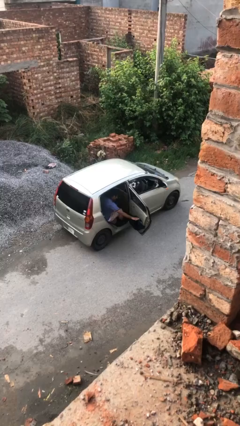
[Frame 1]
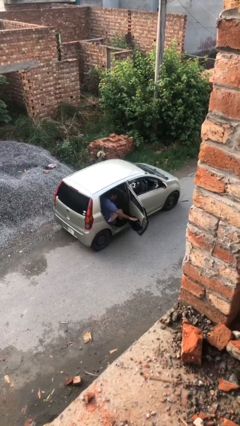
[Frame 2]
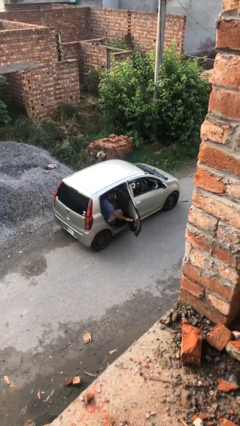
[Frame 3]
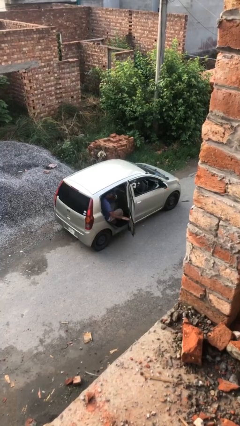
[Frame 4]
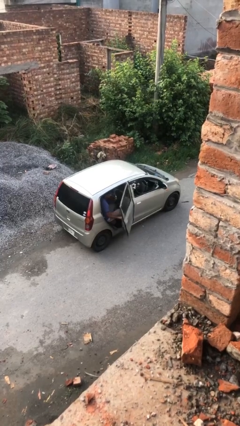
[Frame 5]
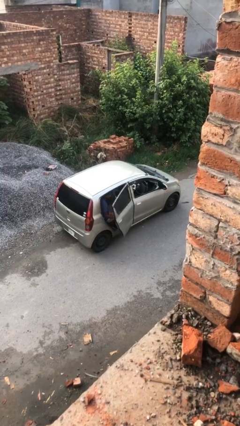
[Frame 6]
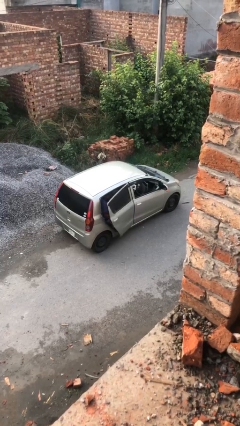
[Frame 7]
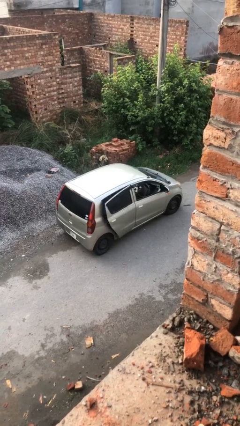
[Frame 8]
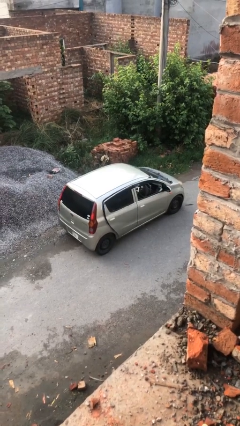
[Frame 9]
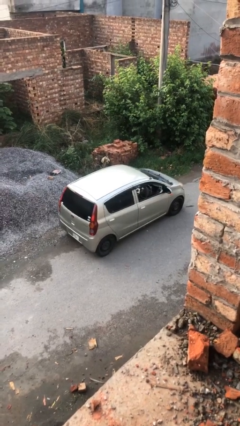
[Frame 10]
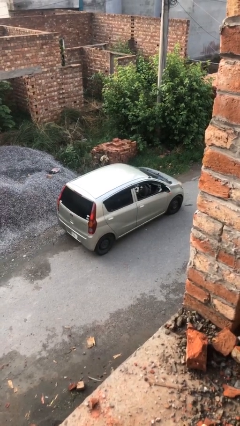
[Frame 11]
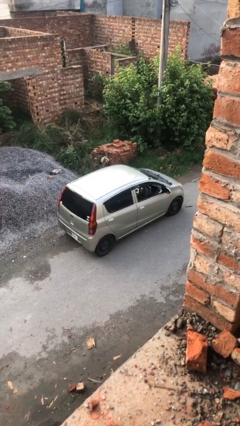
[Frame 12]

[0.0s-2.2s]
person closes car door

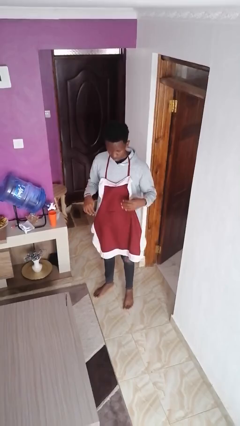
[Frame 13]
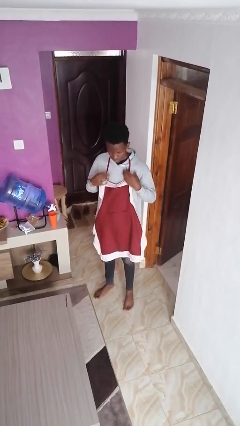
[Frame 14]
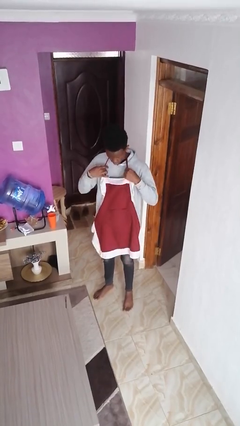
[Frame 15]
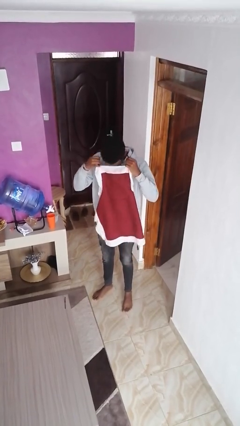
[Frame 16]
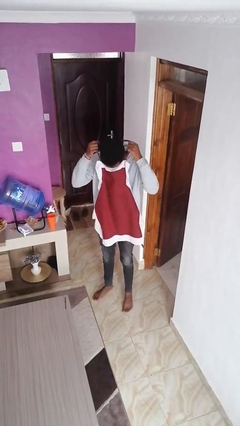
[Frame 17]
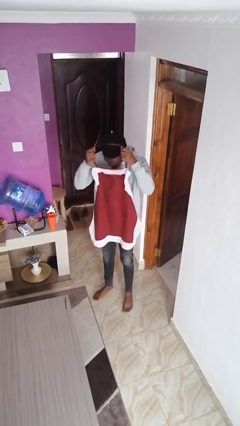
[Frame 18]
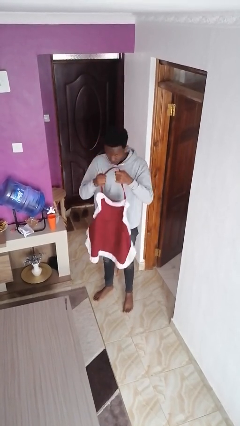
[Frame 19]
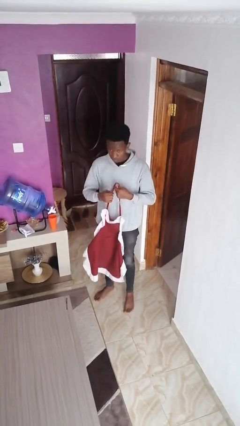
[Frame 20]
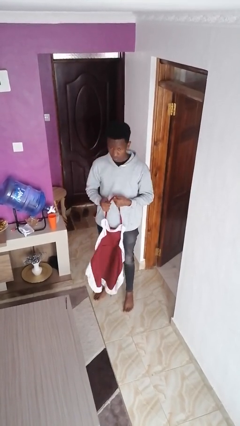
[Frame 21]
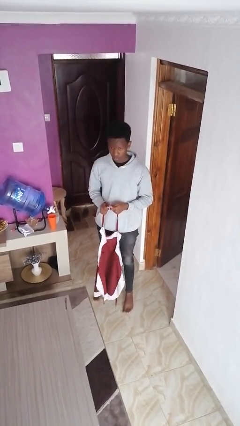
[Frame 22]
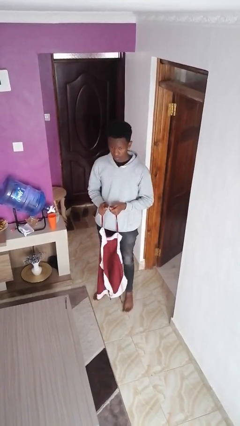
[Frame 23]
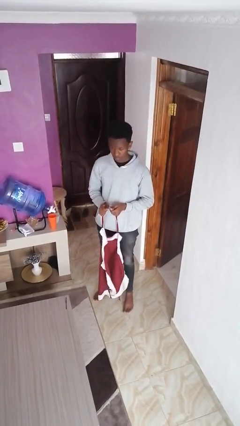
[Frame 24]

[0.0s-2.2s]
person takes off apron

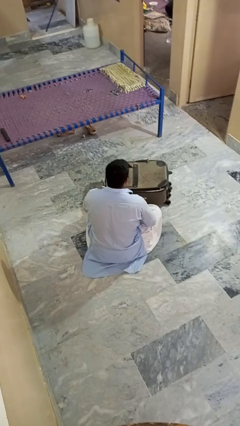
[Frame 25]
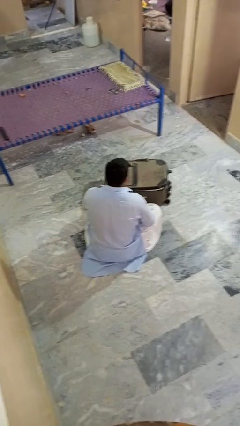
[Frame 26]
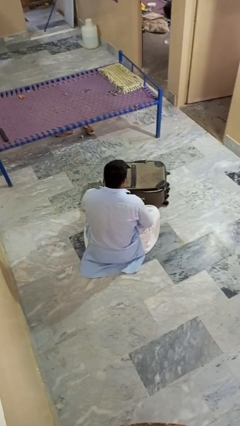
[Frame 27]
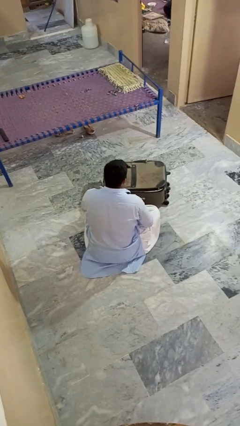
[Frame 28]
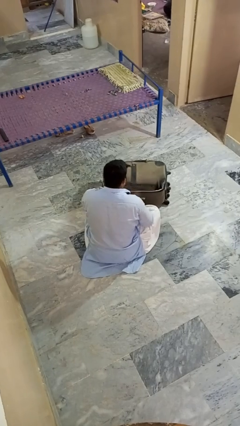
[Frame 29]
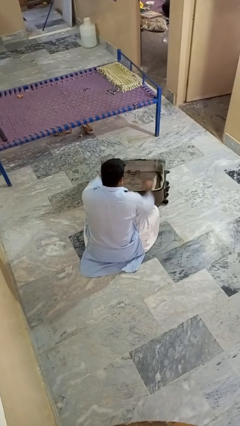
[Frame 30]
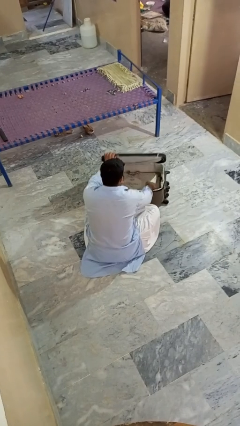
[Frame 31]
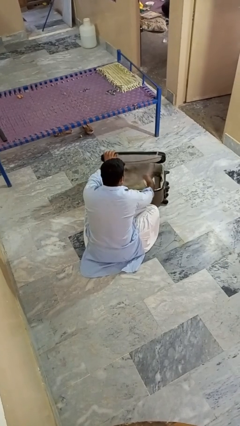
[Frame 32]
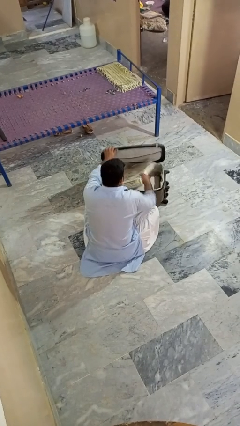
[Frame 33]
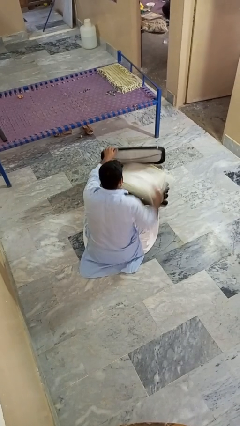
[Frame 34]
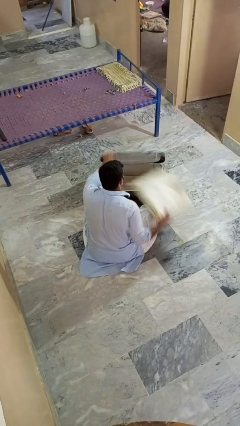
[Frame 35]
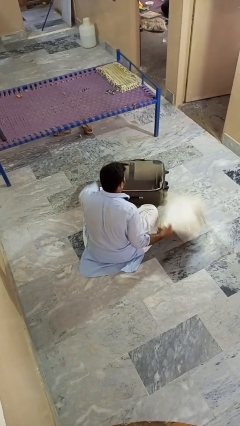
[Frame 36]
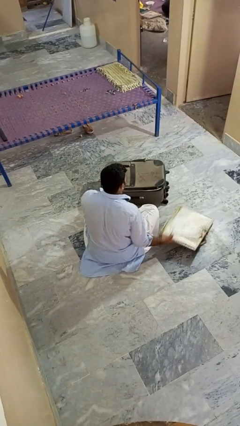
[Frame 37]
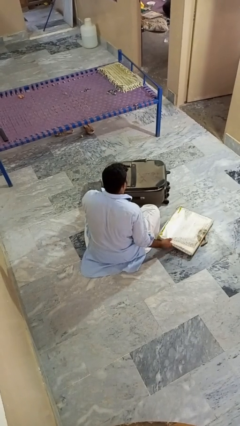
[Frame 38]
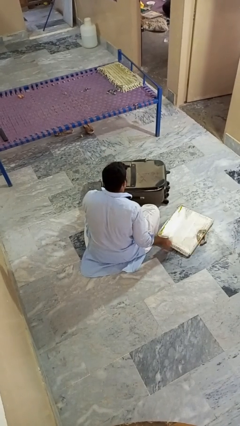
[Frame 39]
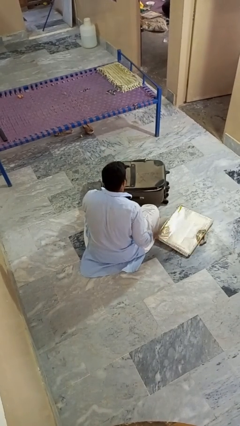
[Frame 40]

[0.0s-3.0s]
person takes object from bag

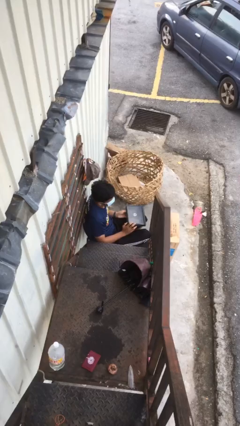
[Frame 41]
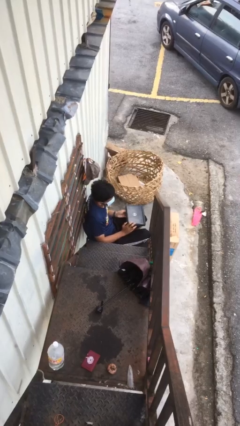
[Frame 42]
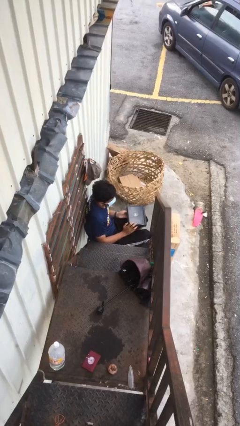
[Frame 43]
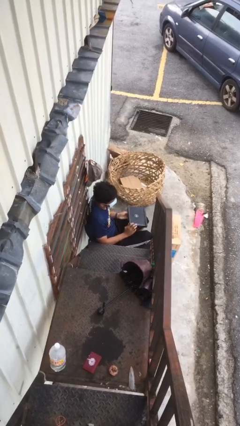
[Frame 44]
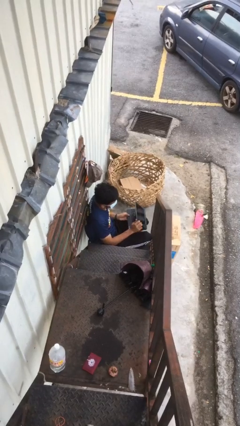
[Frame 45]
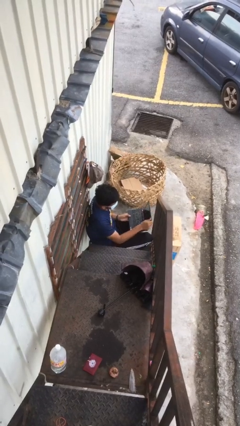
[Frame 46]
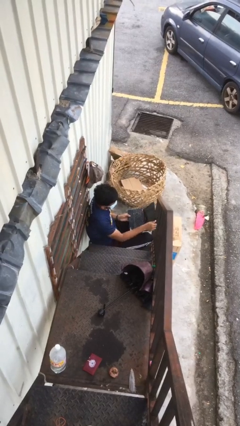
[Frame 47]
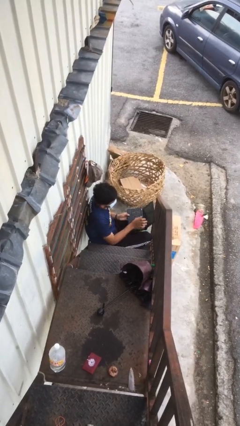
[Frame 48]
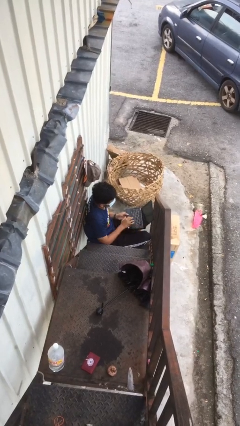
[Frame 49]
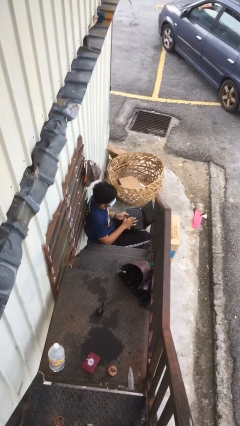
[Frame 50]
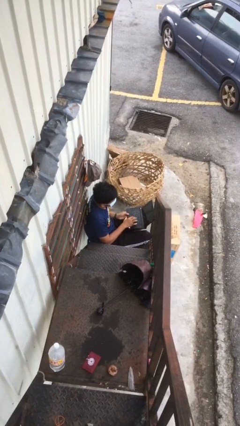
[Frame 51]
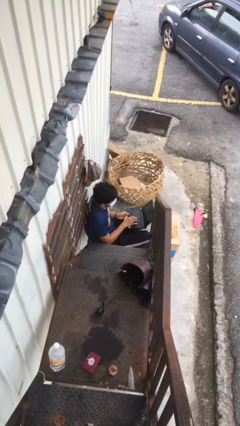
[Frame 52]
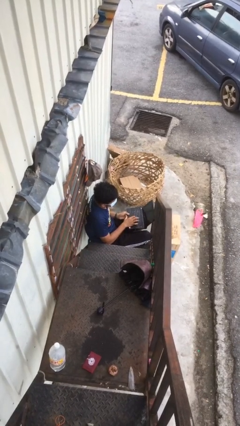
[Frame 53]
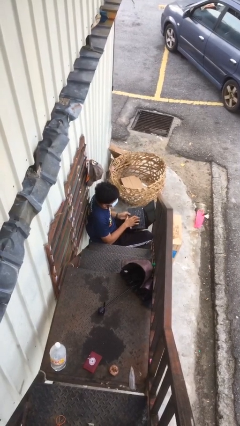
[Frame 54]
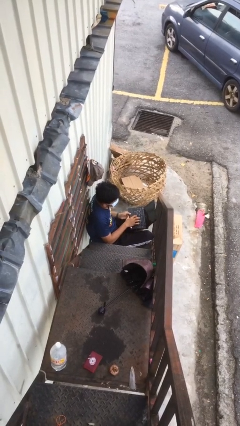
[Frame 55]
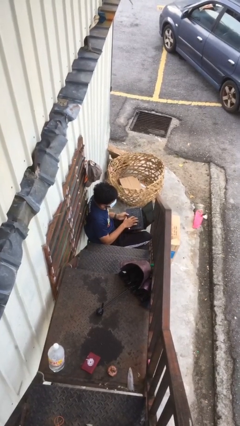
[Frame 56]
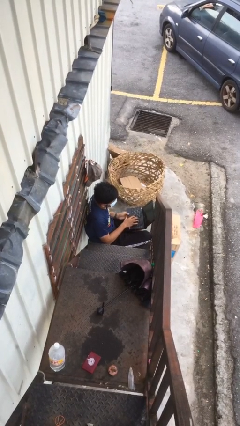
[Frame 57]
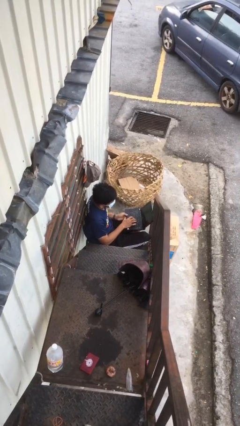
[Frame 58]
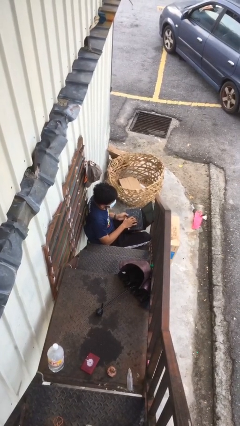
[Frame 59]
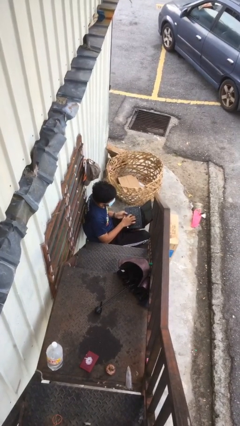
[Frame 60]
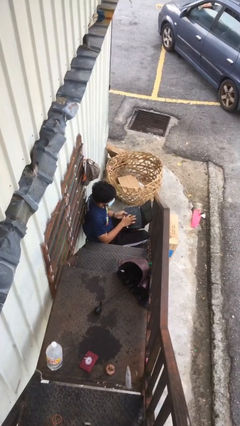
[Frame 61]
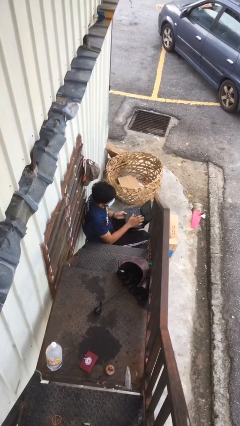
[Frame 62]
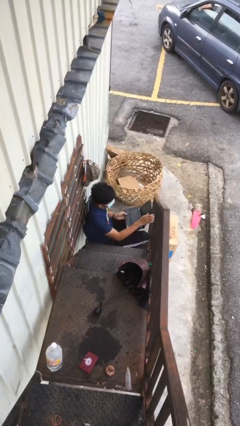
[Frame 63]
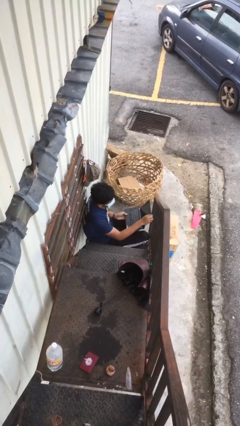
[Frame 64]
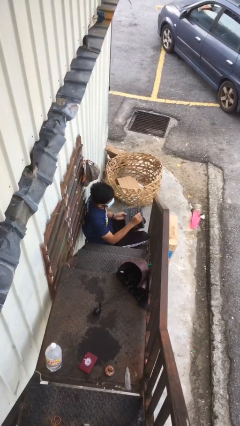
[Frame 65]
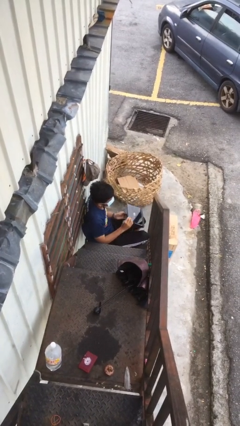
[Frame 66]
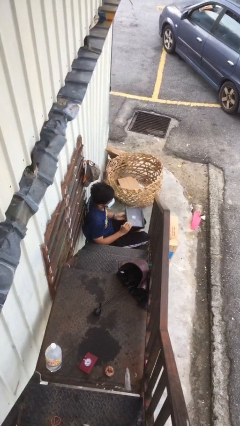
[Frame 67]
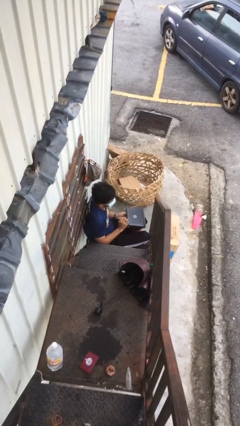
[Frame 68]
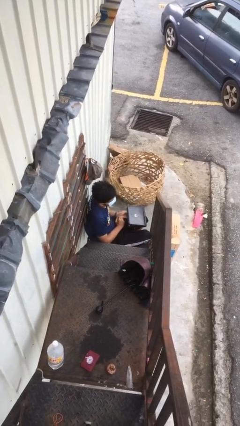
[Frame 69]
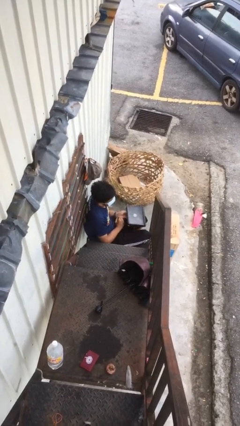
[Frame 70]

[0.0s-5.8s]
person interacts with laptop

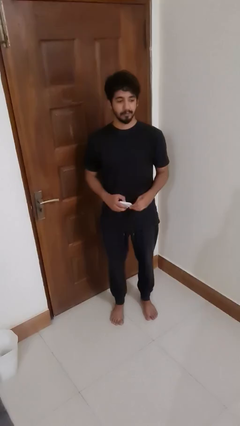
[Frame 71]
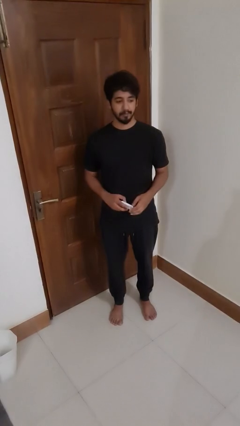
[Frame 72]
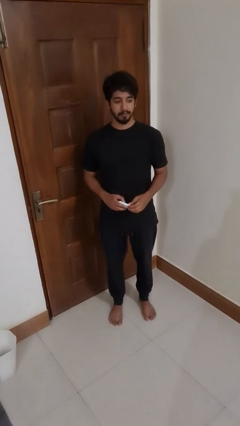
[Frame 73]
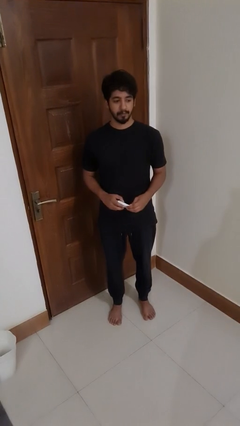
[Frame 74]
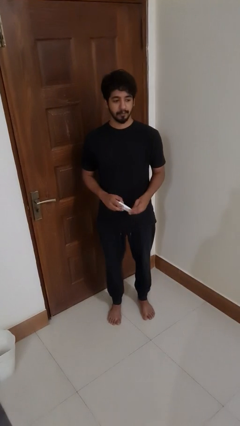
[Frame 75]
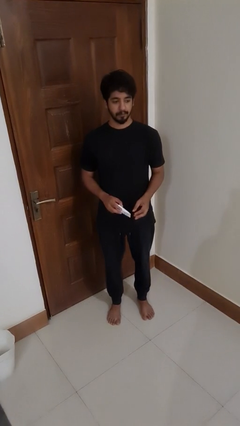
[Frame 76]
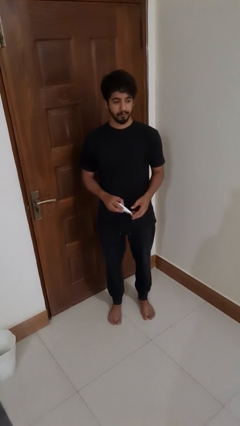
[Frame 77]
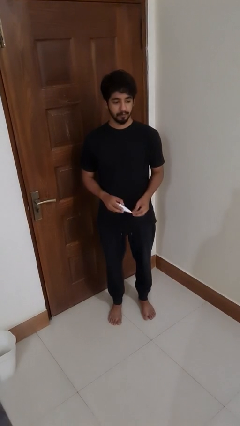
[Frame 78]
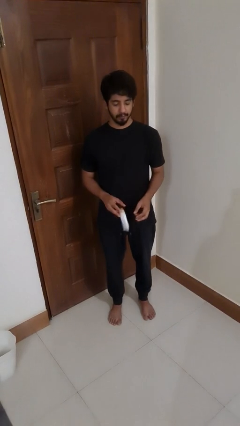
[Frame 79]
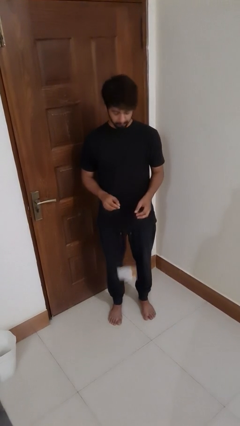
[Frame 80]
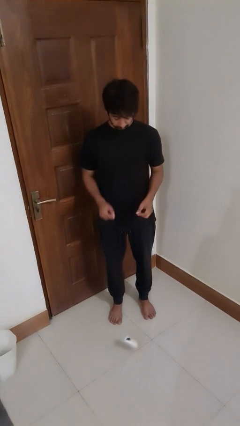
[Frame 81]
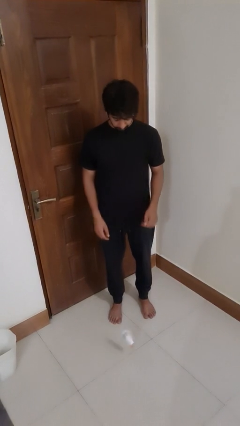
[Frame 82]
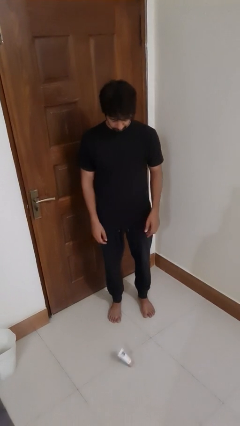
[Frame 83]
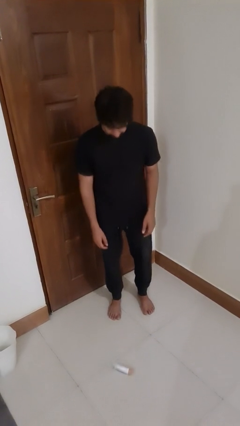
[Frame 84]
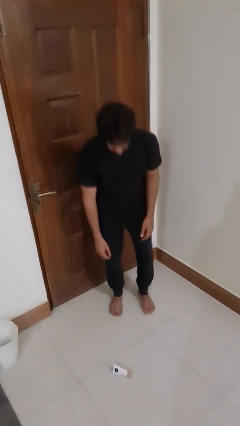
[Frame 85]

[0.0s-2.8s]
person drops object

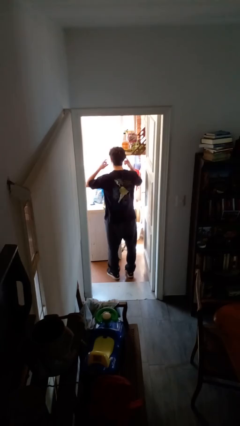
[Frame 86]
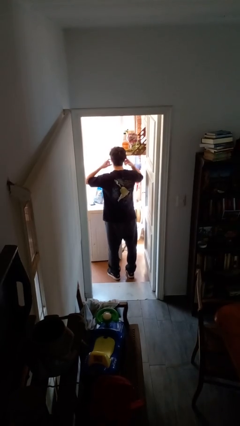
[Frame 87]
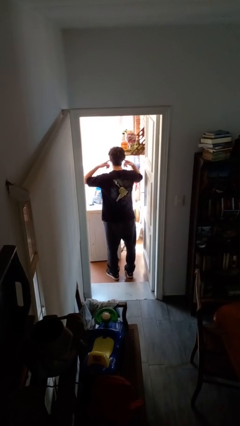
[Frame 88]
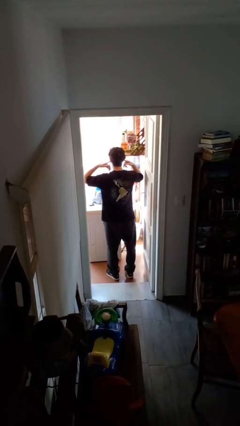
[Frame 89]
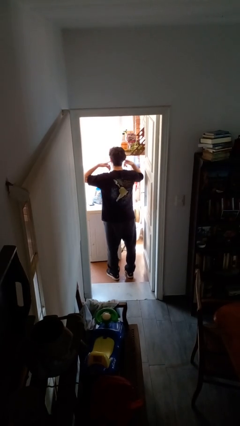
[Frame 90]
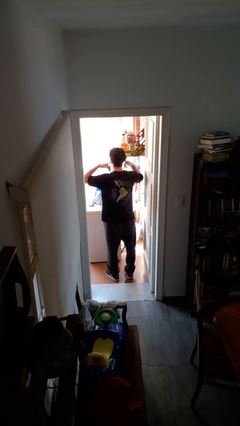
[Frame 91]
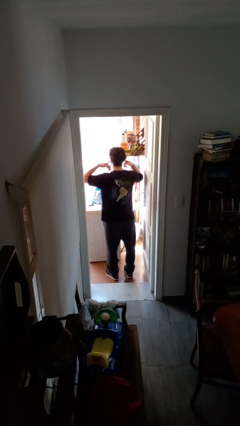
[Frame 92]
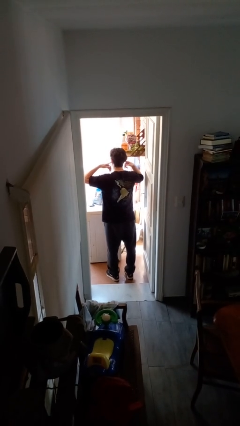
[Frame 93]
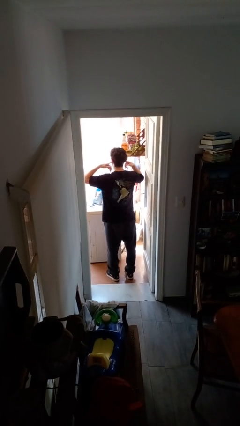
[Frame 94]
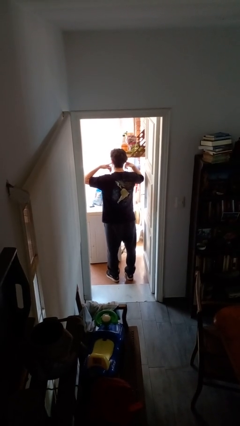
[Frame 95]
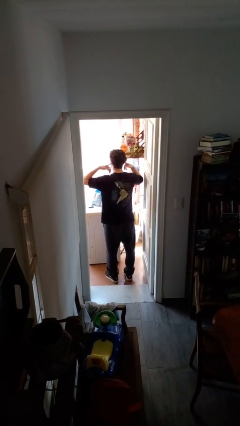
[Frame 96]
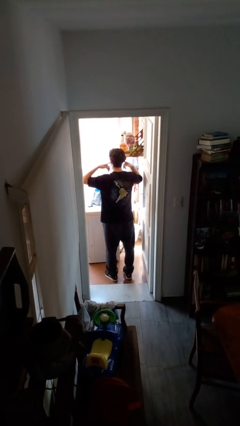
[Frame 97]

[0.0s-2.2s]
person puts fingers in ear
